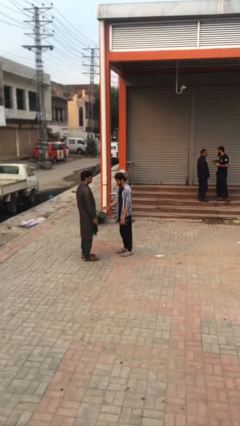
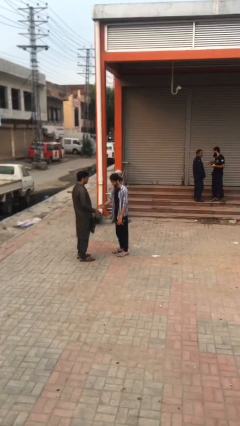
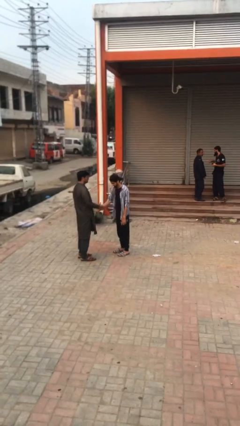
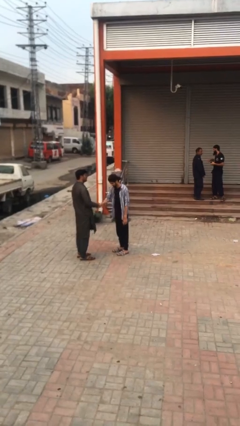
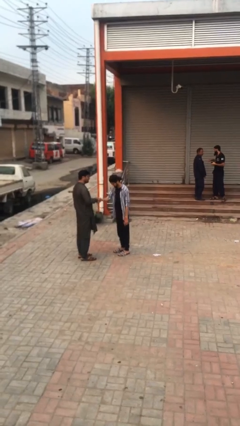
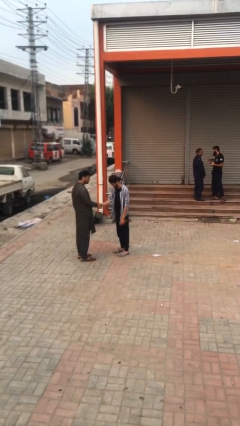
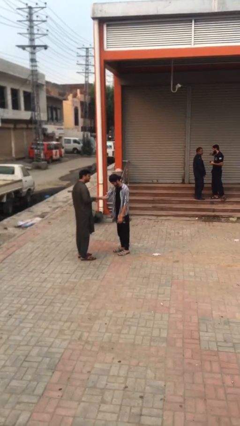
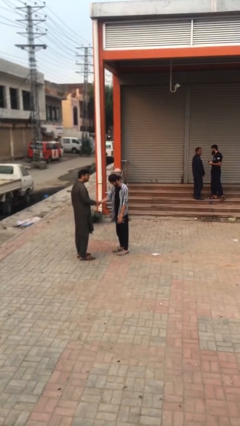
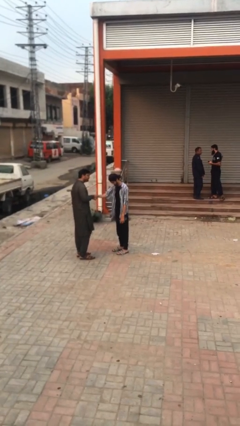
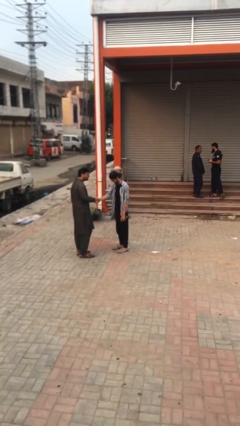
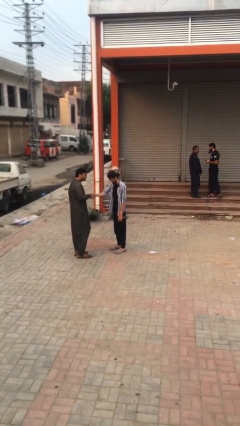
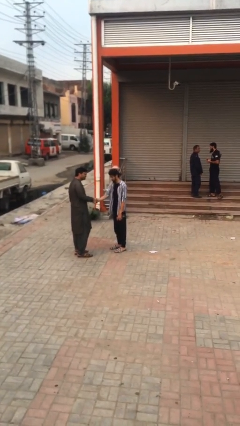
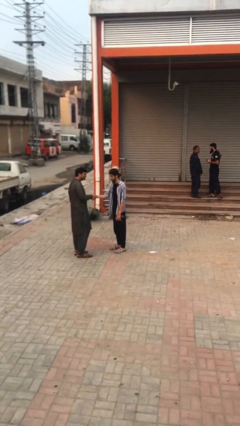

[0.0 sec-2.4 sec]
person shakes hand

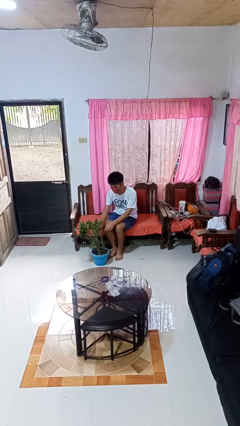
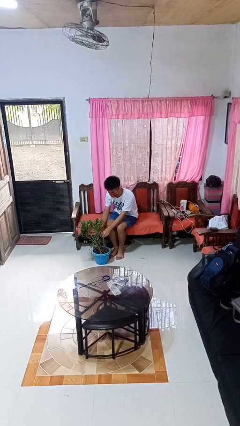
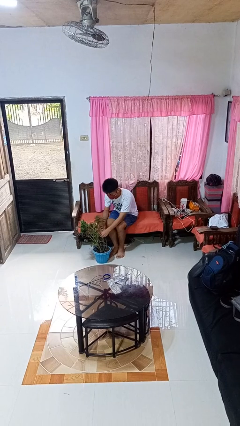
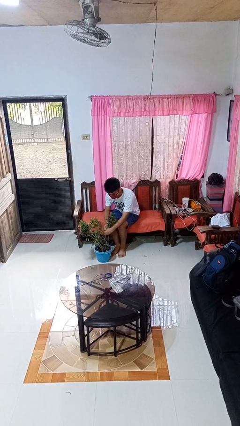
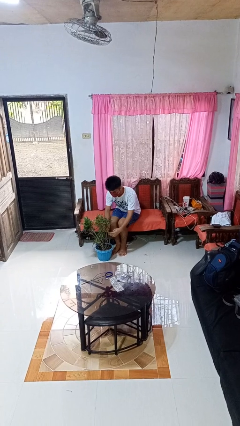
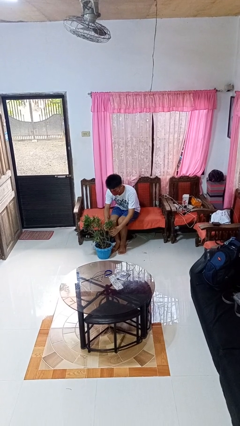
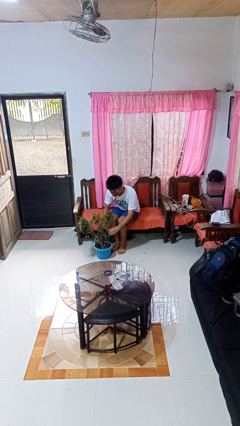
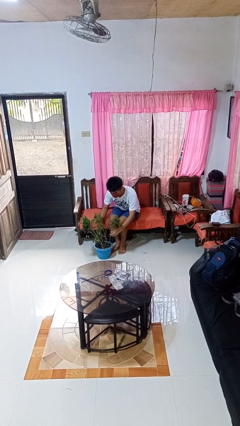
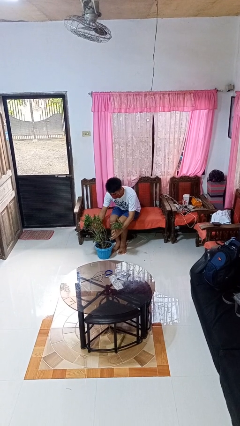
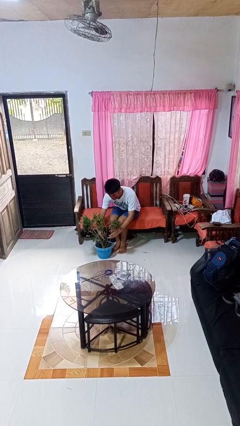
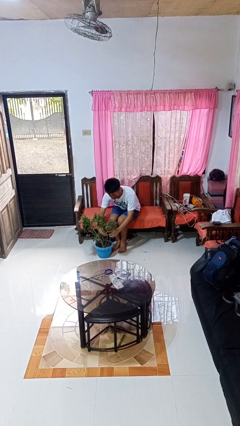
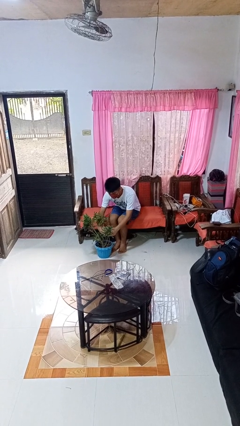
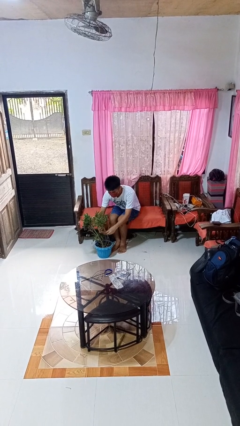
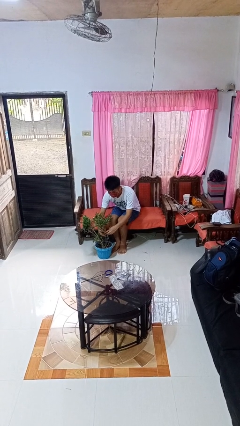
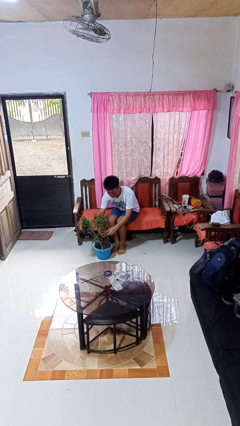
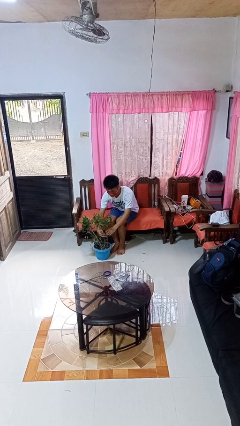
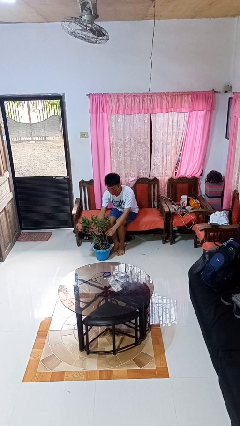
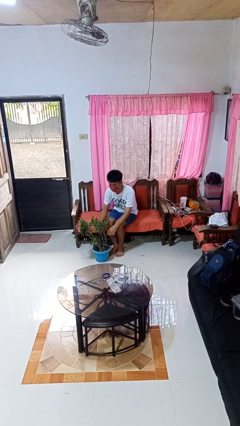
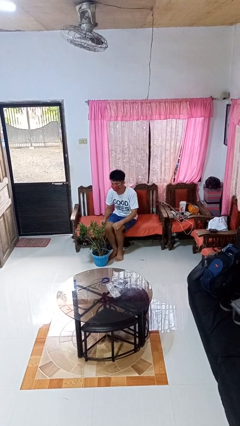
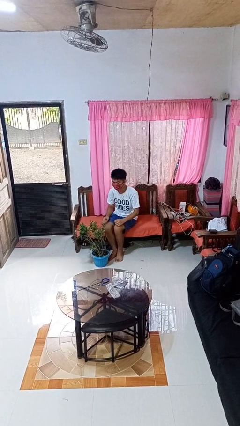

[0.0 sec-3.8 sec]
person arranges flowers in vase

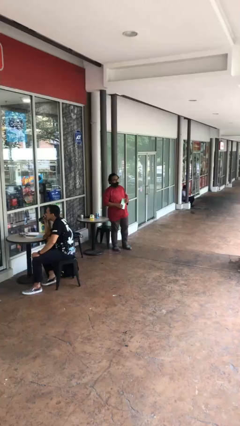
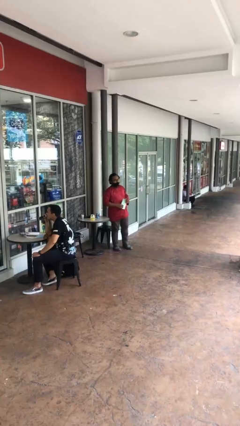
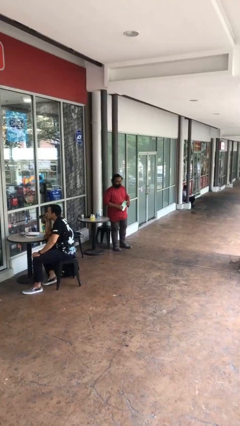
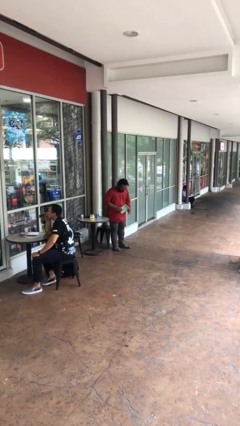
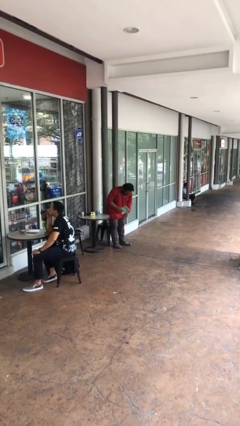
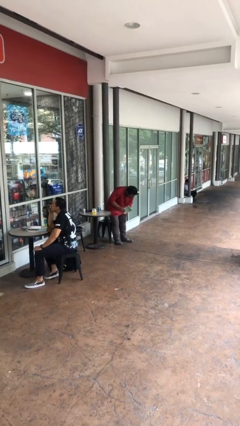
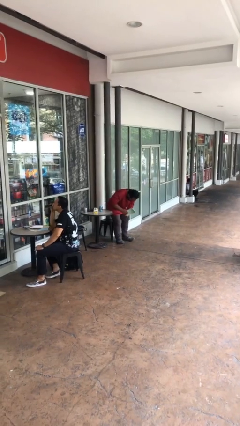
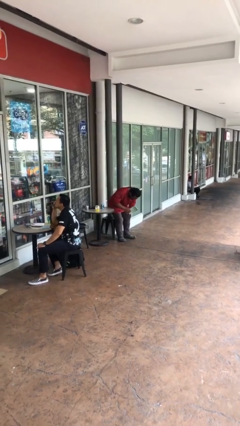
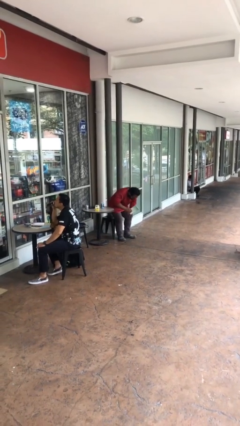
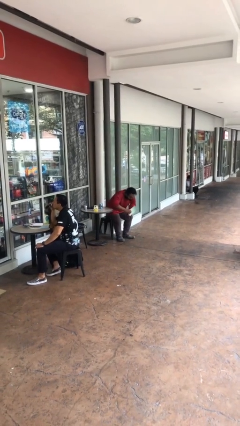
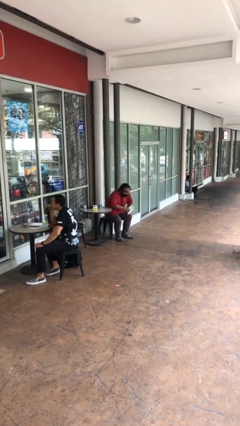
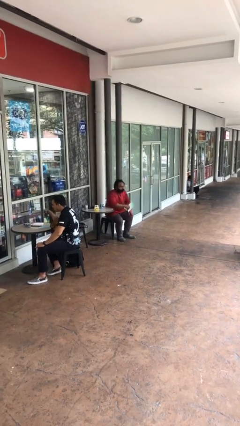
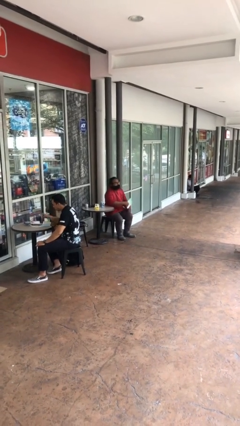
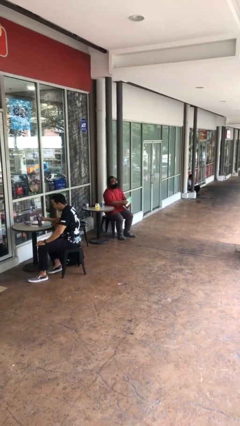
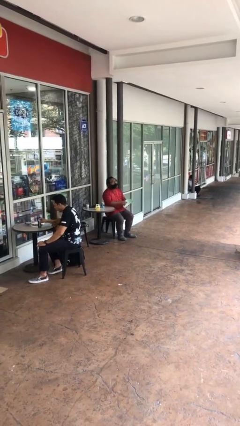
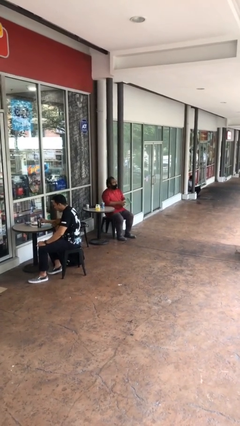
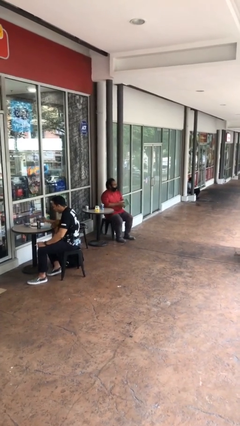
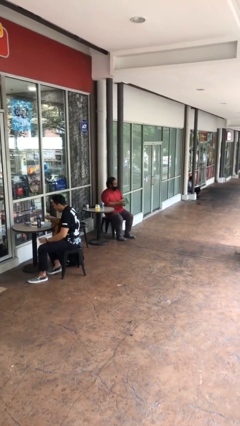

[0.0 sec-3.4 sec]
person sits down

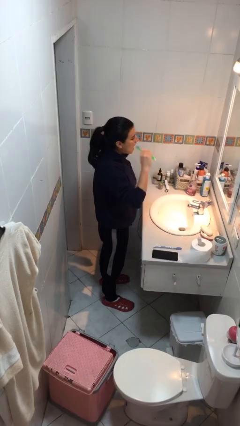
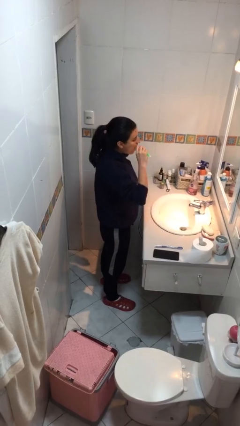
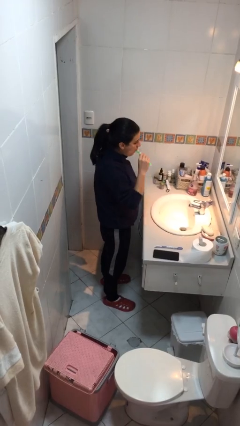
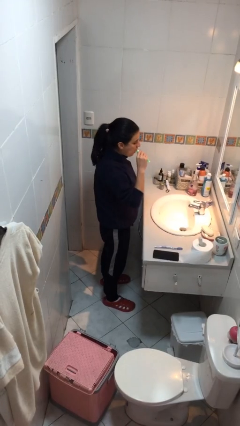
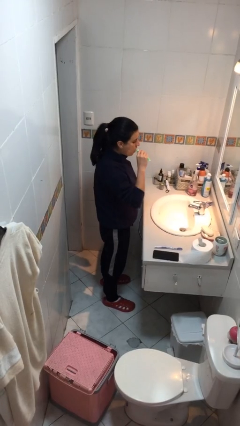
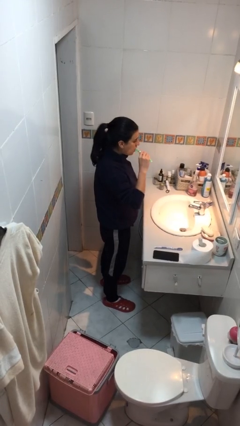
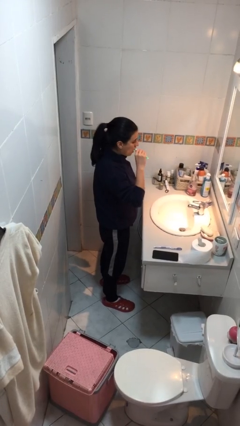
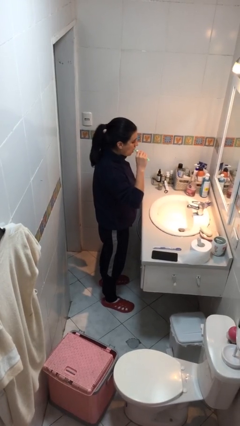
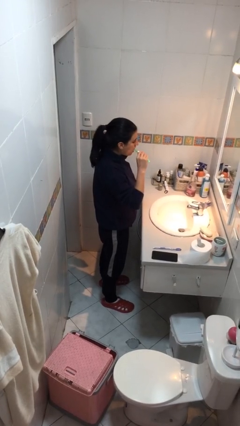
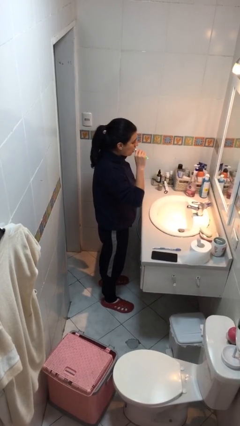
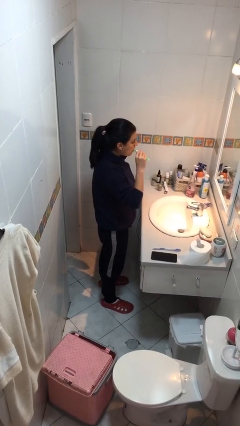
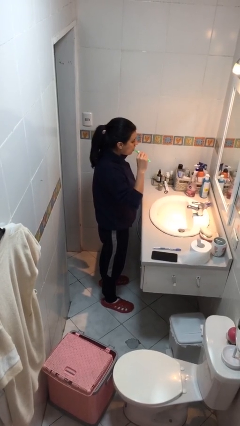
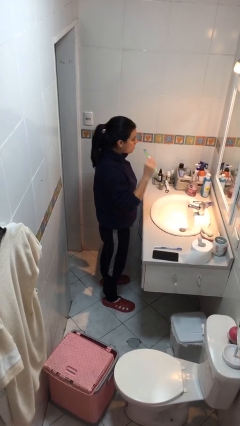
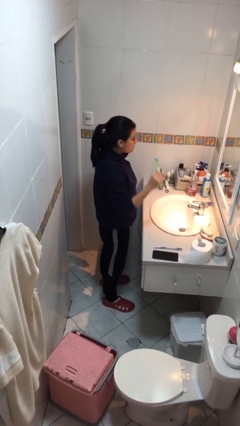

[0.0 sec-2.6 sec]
person brushes teeth

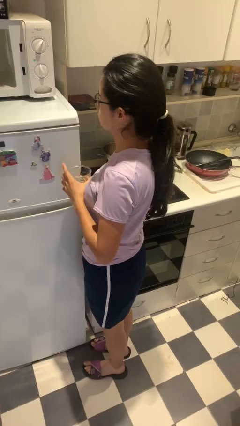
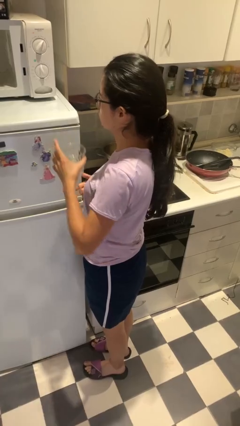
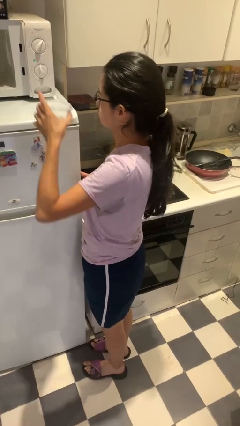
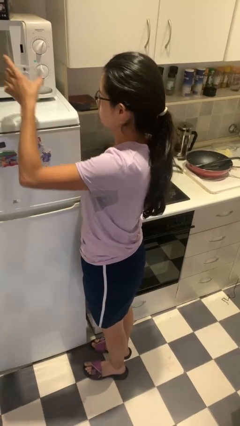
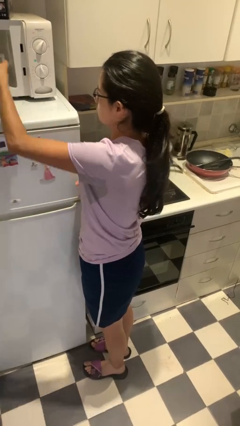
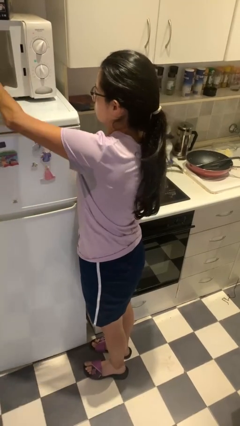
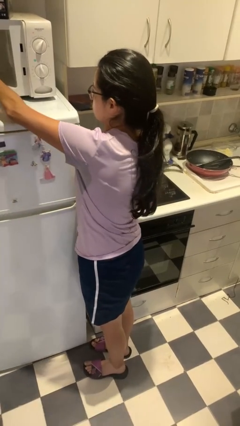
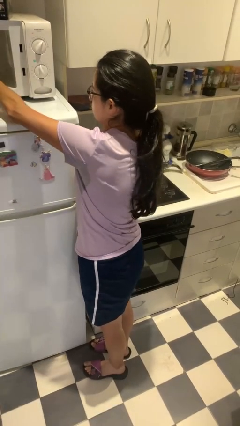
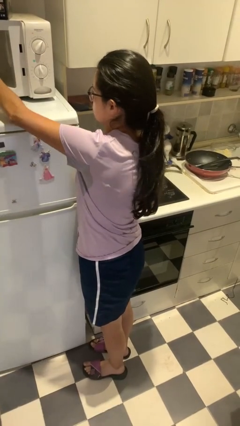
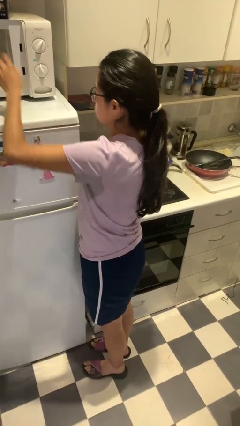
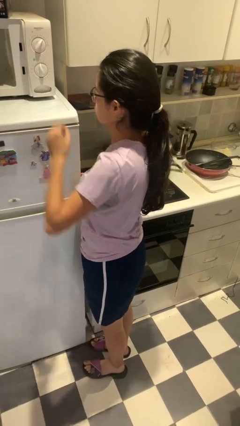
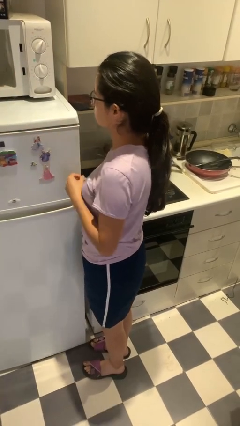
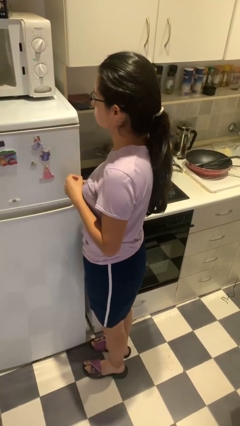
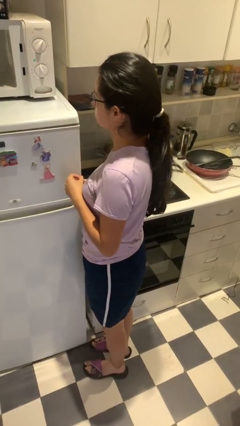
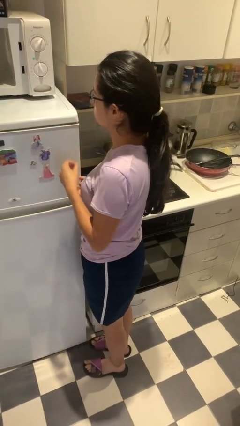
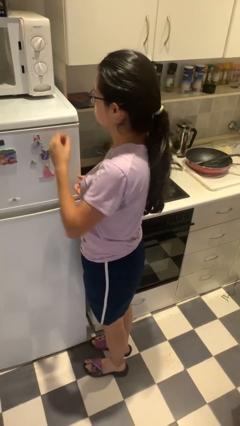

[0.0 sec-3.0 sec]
person puts object into microwave

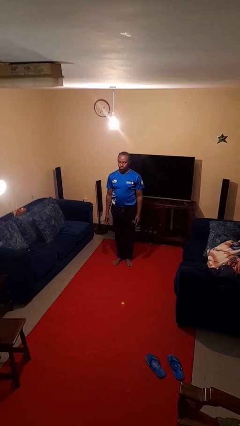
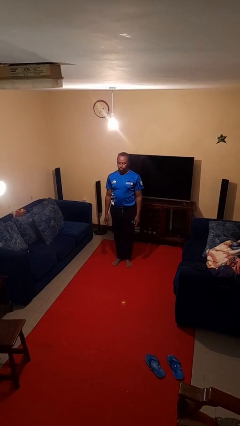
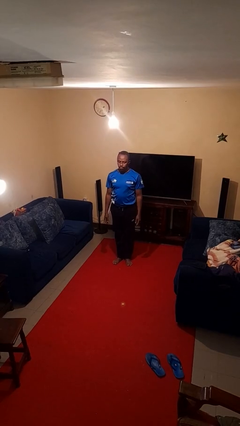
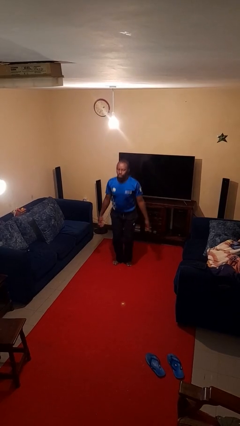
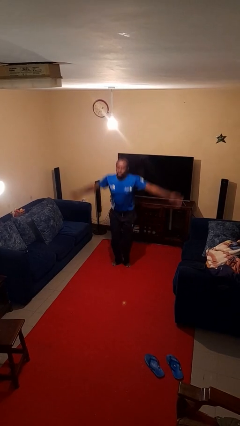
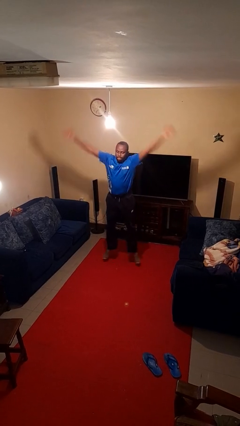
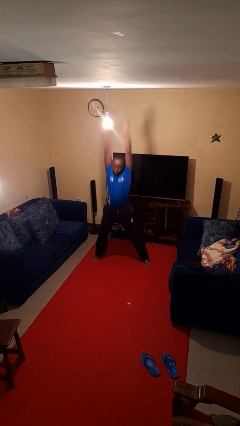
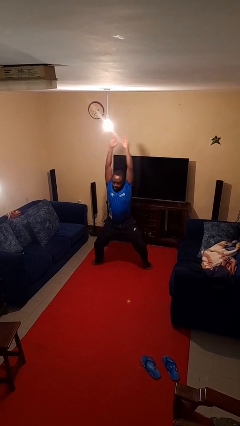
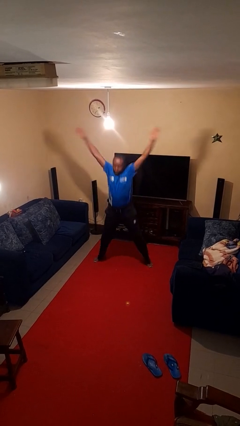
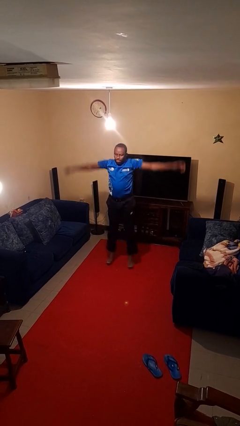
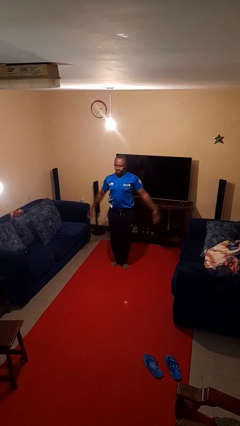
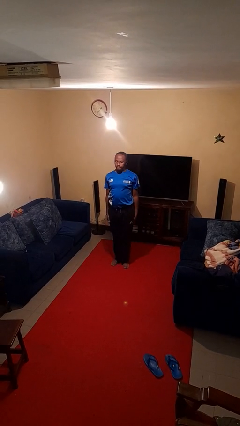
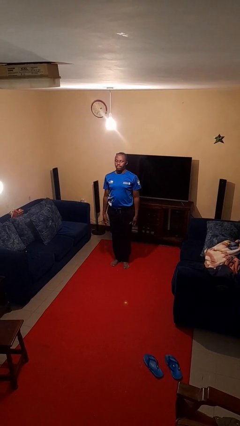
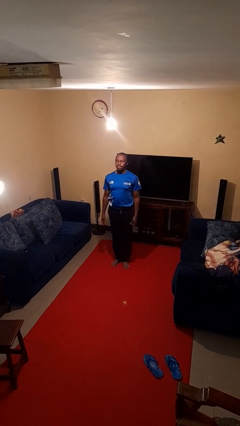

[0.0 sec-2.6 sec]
person exercises with jumping jacks
